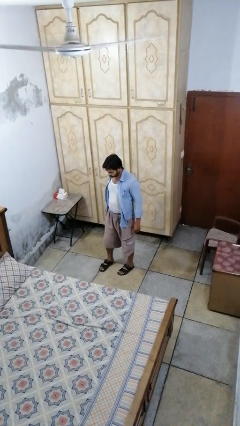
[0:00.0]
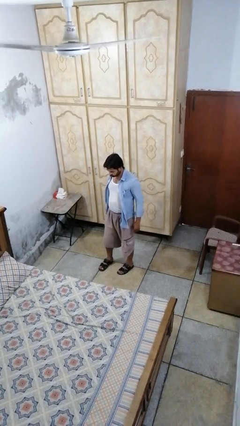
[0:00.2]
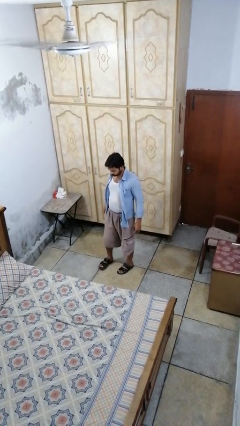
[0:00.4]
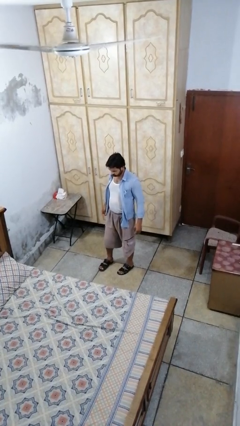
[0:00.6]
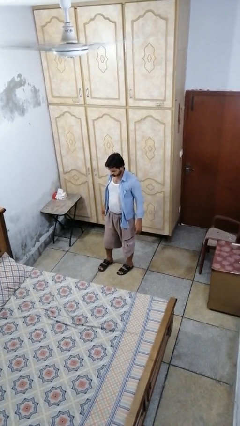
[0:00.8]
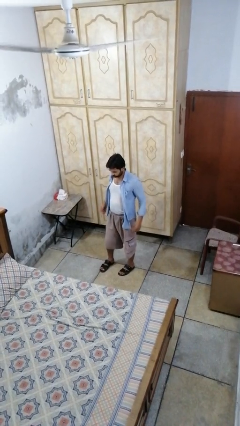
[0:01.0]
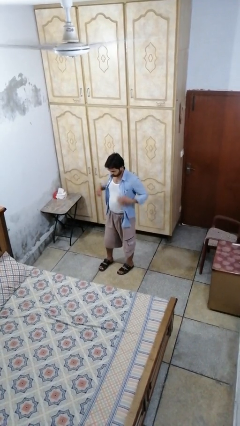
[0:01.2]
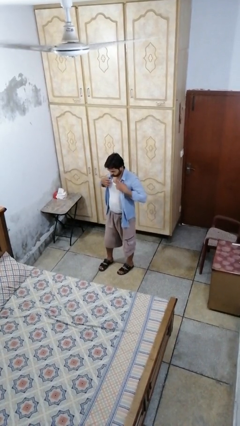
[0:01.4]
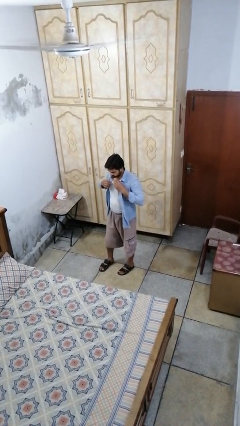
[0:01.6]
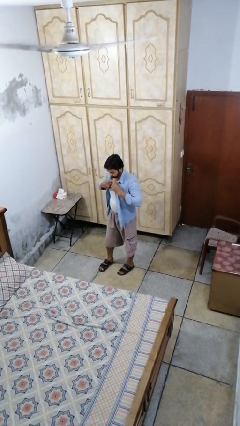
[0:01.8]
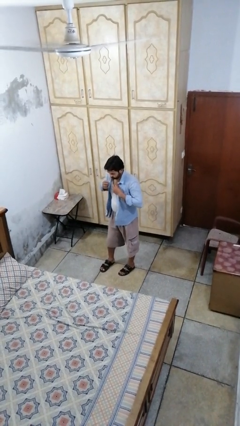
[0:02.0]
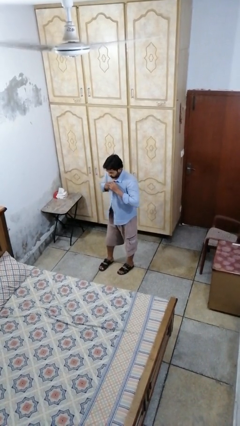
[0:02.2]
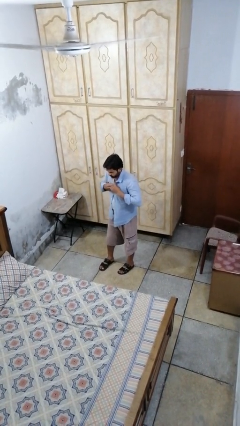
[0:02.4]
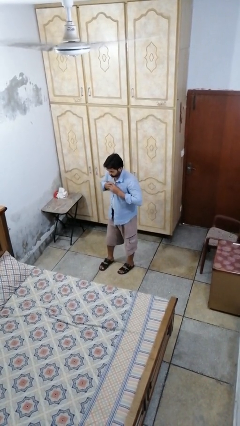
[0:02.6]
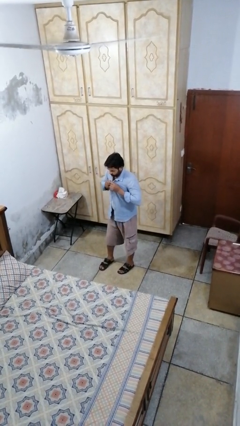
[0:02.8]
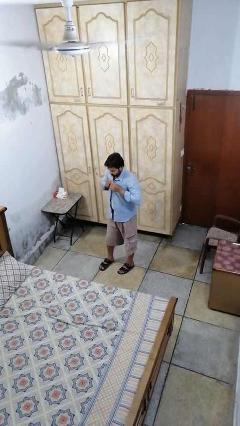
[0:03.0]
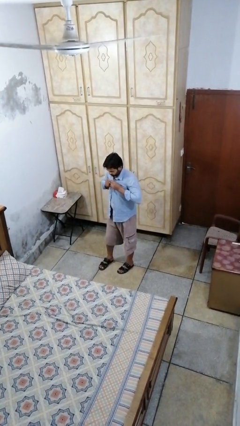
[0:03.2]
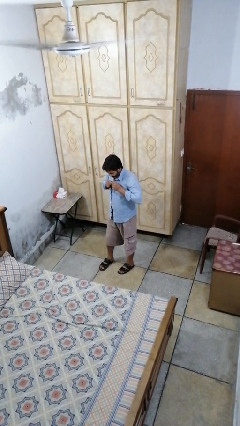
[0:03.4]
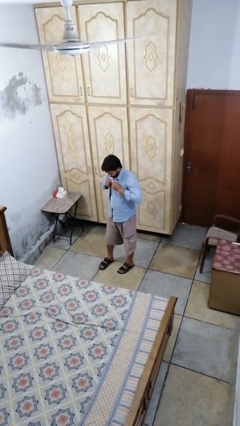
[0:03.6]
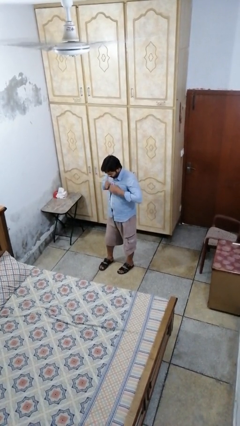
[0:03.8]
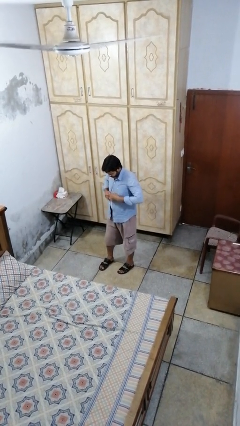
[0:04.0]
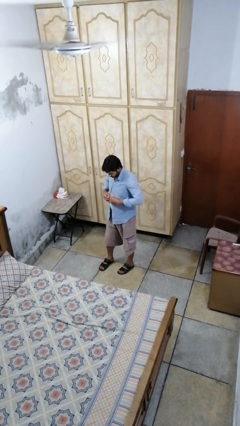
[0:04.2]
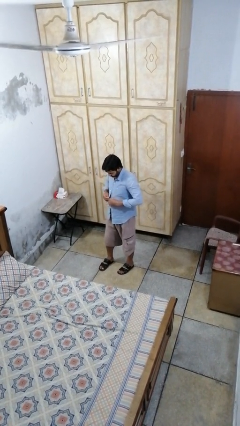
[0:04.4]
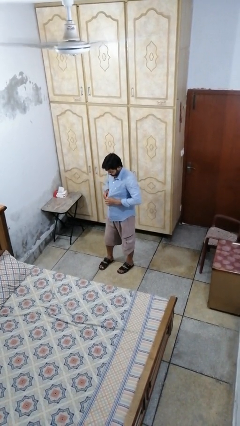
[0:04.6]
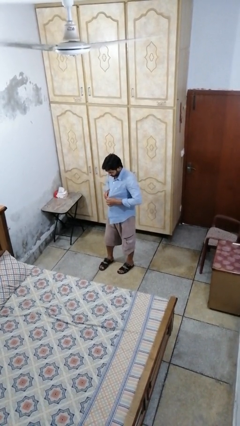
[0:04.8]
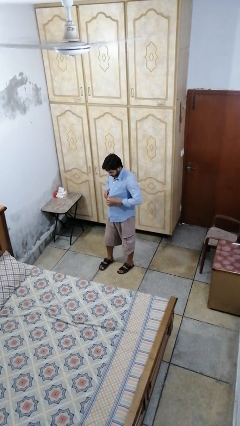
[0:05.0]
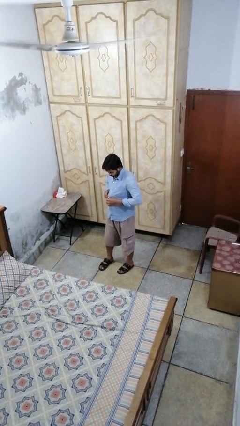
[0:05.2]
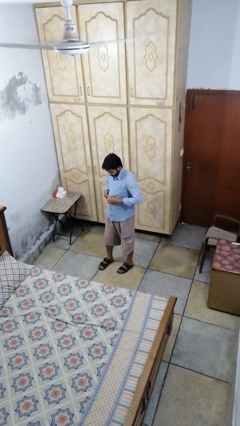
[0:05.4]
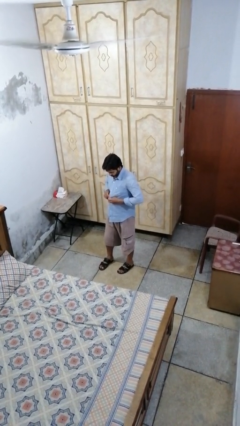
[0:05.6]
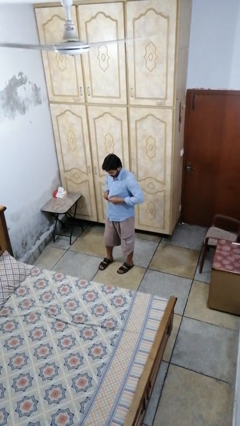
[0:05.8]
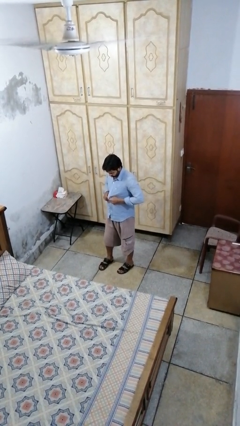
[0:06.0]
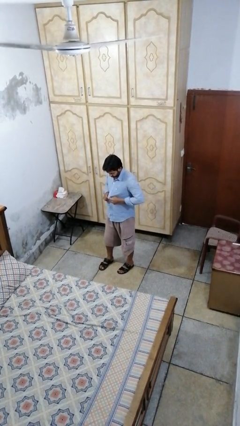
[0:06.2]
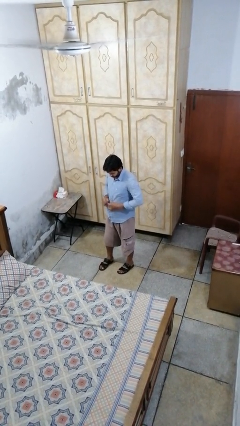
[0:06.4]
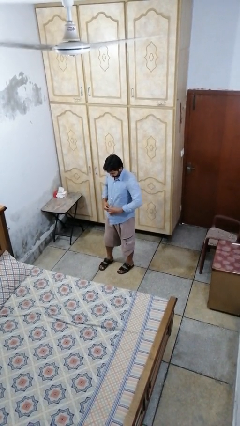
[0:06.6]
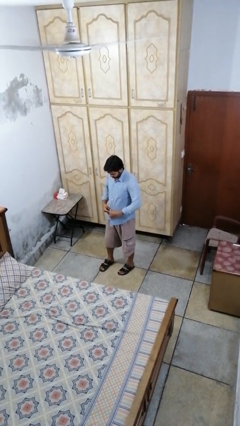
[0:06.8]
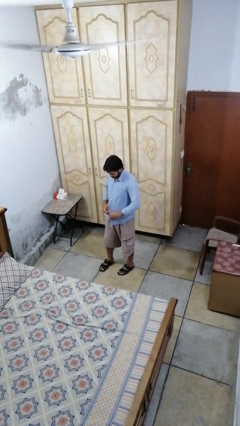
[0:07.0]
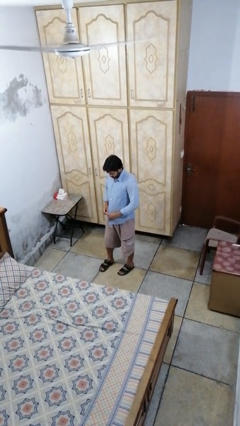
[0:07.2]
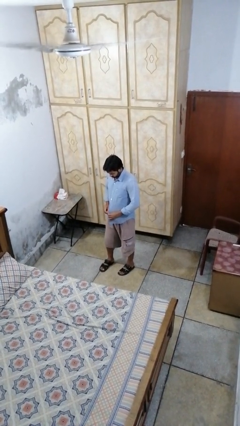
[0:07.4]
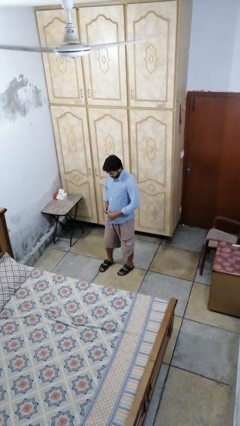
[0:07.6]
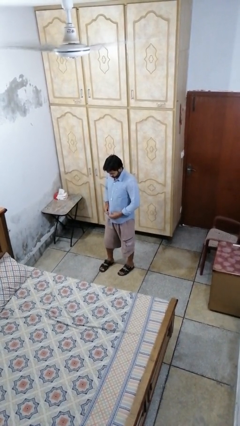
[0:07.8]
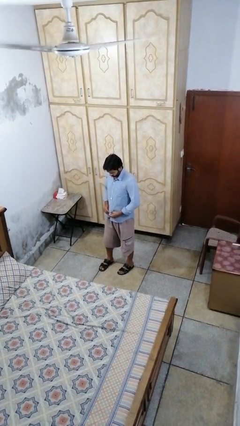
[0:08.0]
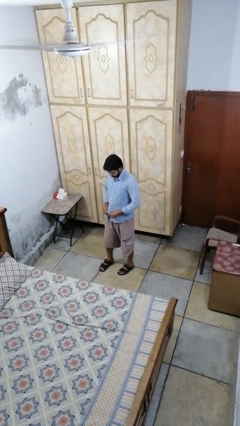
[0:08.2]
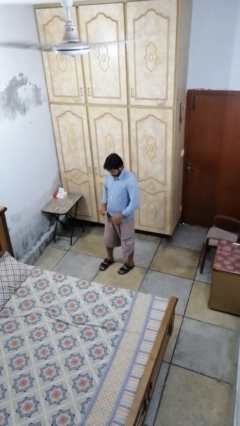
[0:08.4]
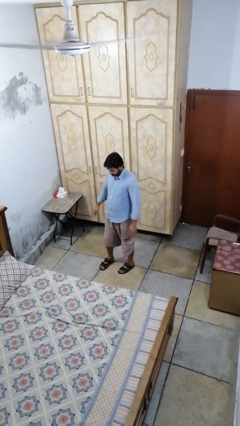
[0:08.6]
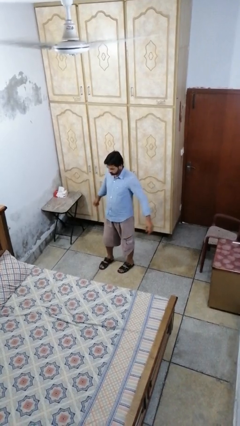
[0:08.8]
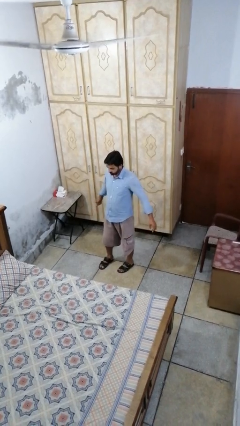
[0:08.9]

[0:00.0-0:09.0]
person buttons shirt

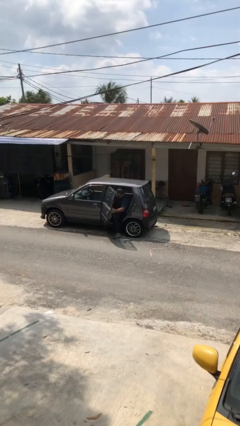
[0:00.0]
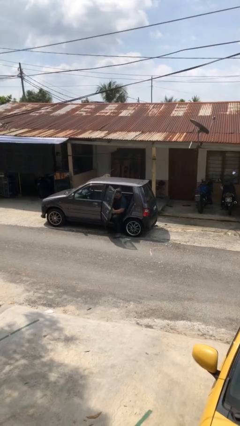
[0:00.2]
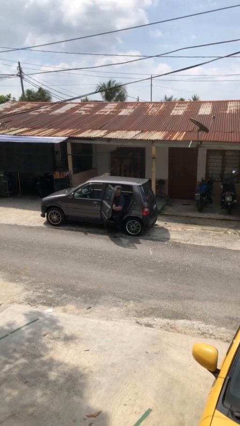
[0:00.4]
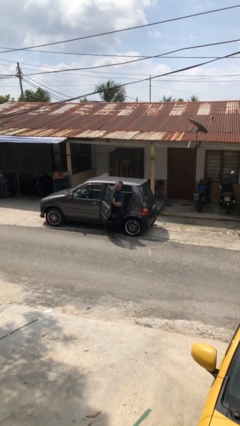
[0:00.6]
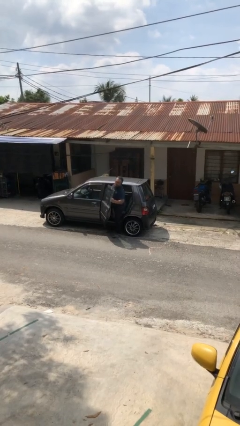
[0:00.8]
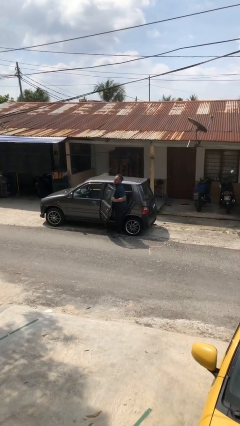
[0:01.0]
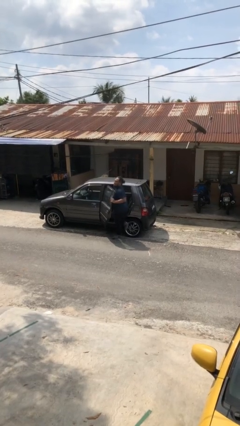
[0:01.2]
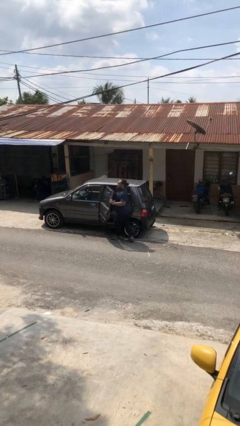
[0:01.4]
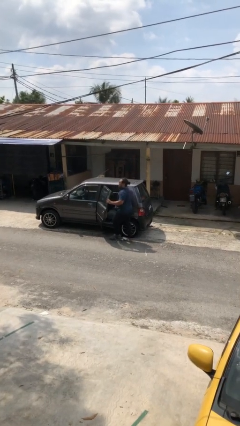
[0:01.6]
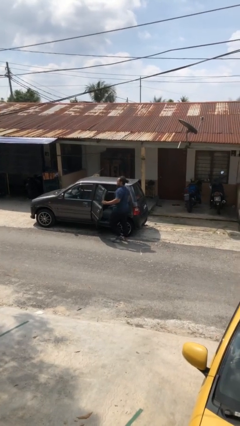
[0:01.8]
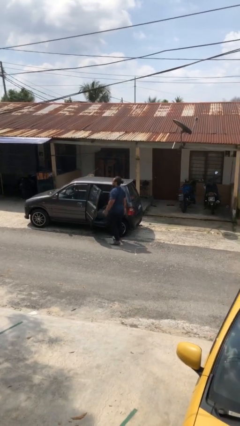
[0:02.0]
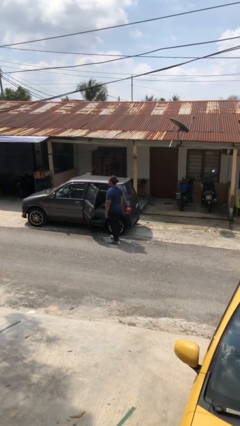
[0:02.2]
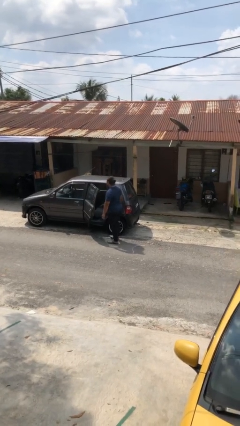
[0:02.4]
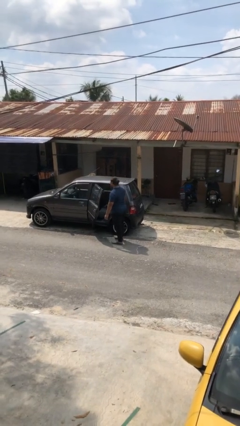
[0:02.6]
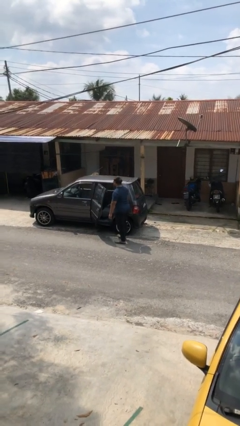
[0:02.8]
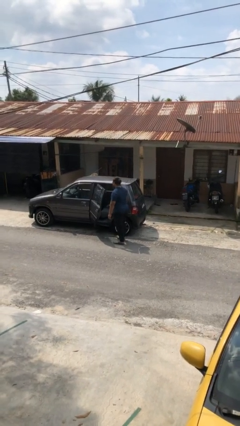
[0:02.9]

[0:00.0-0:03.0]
person exits car

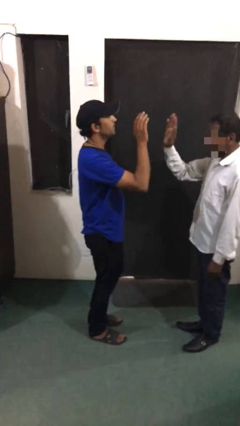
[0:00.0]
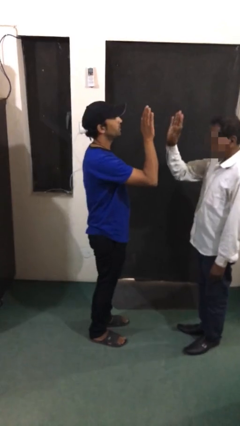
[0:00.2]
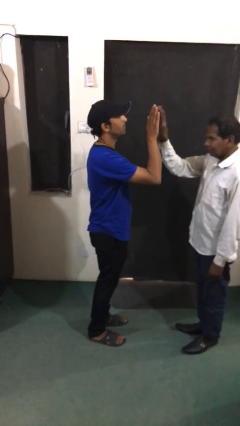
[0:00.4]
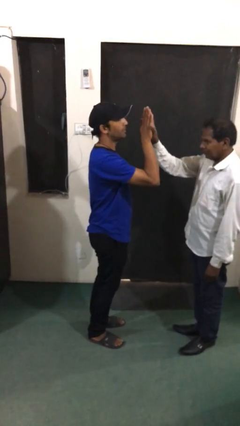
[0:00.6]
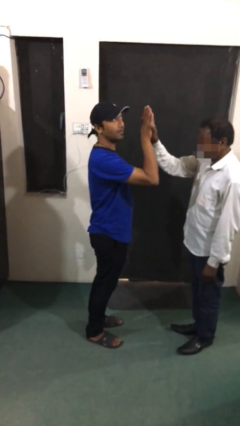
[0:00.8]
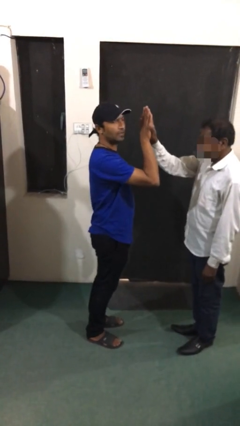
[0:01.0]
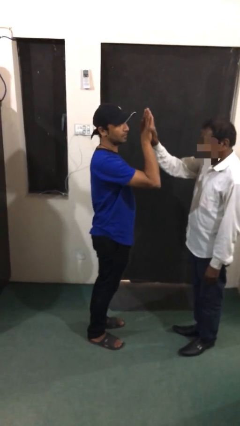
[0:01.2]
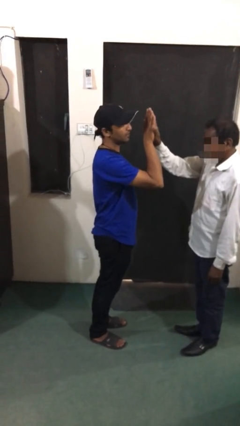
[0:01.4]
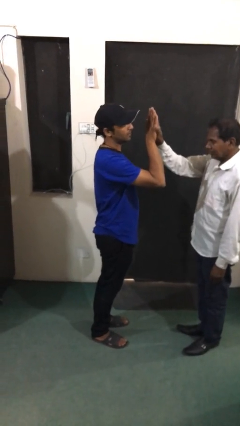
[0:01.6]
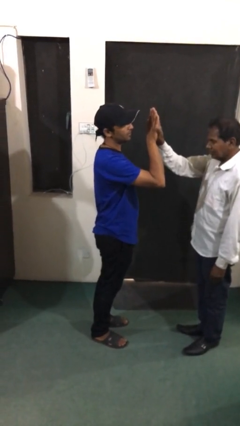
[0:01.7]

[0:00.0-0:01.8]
person highfives hand

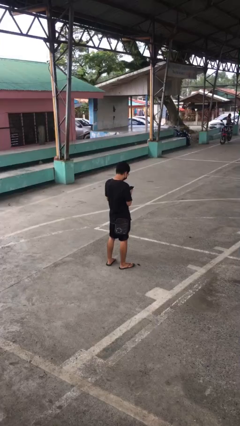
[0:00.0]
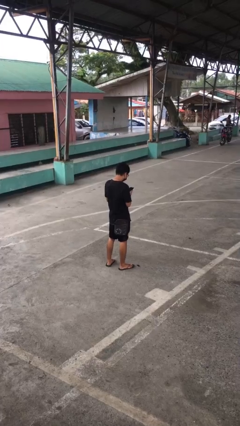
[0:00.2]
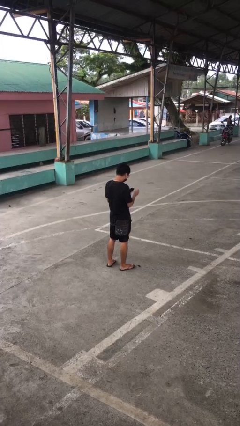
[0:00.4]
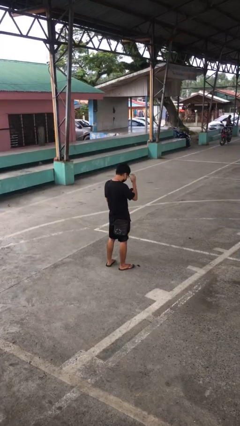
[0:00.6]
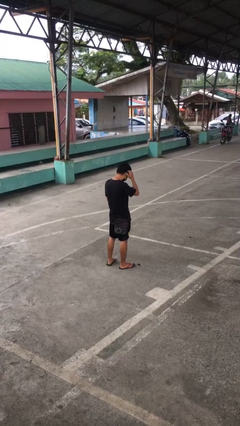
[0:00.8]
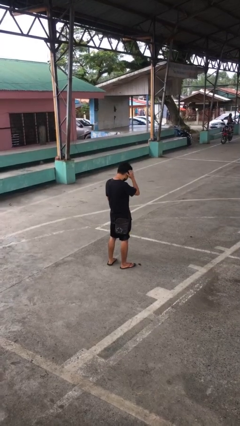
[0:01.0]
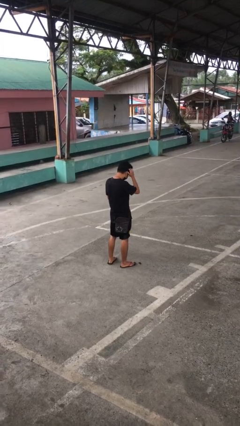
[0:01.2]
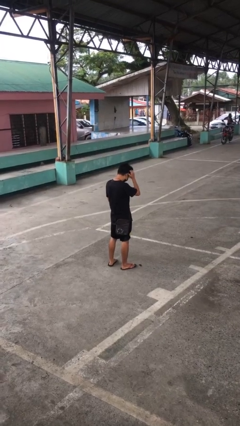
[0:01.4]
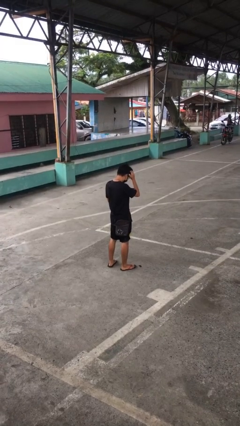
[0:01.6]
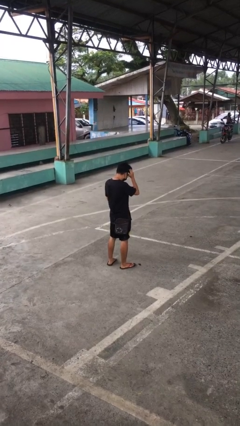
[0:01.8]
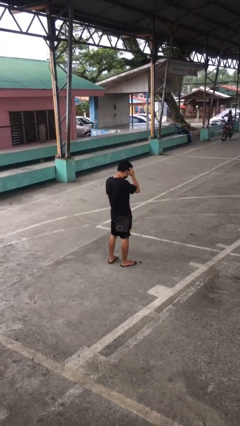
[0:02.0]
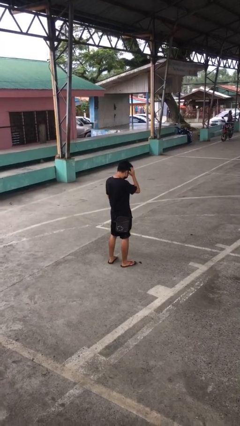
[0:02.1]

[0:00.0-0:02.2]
person scratches face

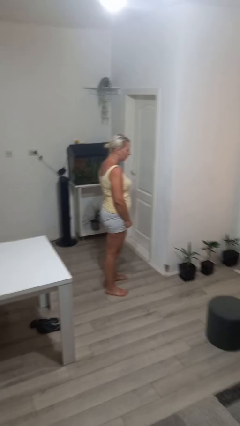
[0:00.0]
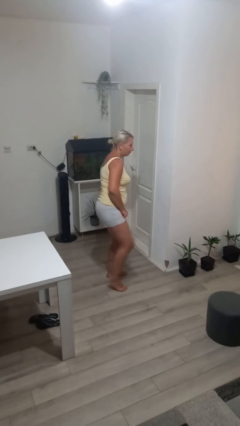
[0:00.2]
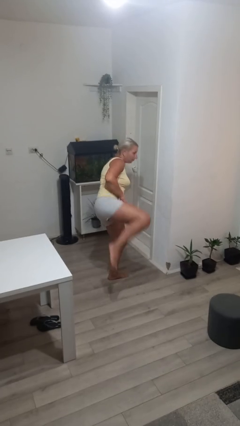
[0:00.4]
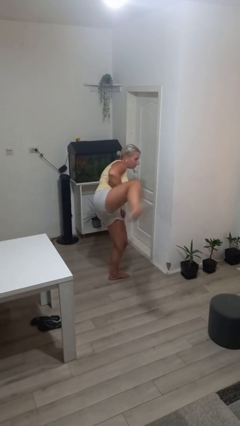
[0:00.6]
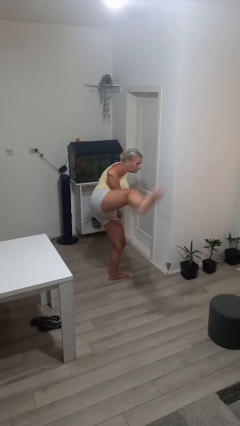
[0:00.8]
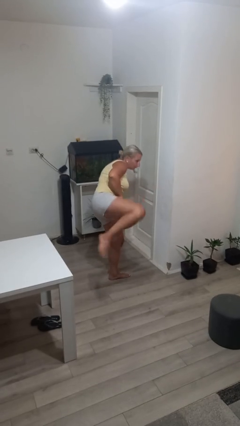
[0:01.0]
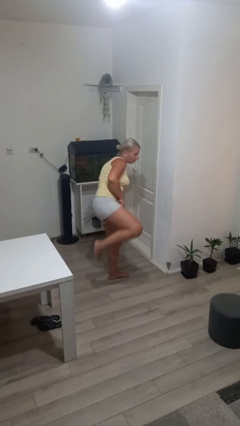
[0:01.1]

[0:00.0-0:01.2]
person karate kicks

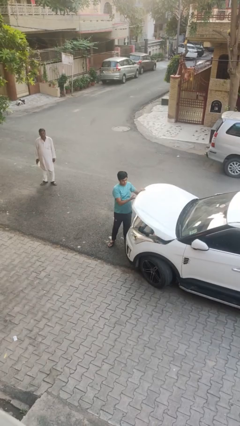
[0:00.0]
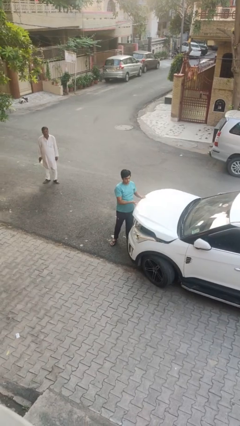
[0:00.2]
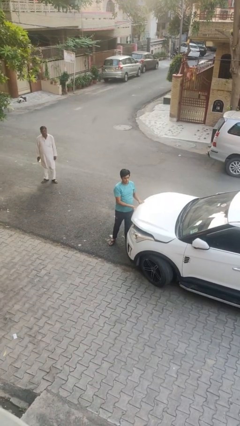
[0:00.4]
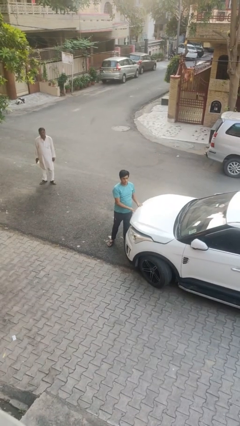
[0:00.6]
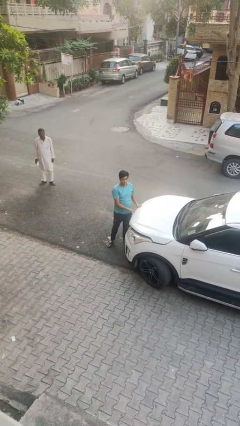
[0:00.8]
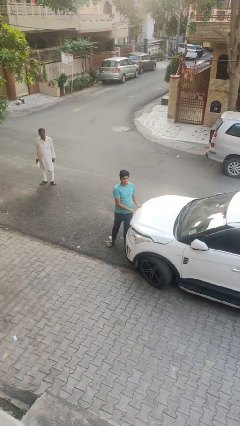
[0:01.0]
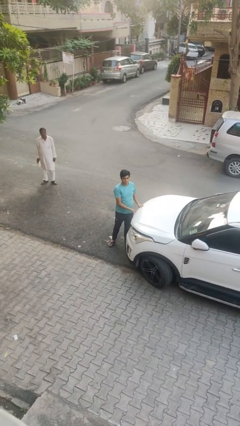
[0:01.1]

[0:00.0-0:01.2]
person closes car hood
